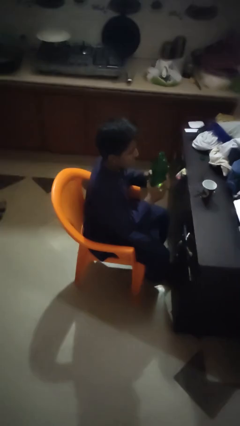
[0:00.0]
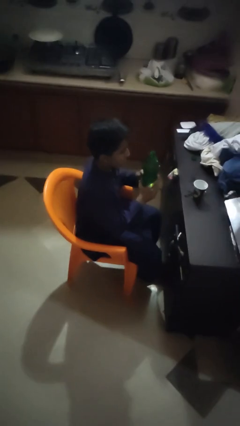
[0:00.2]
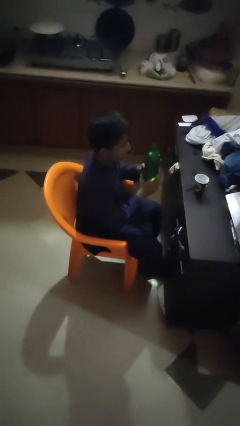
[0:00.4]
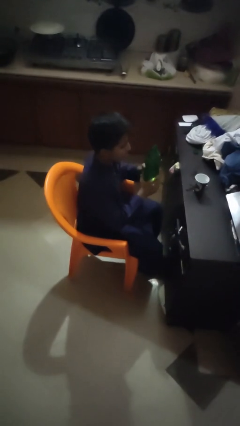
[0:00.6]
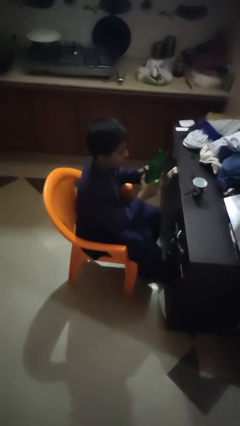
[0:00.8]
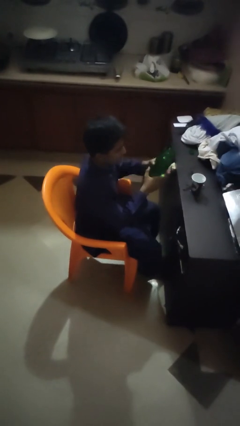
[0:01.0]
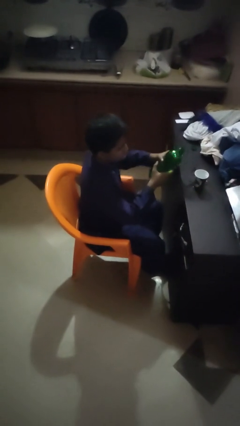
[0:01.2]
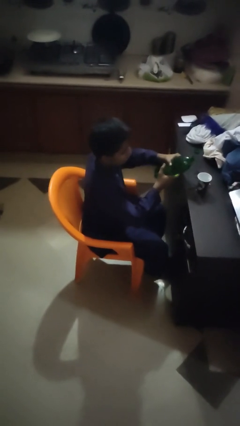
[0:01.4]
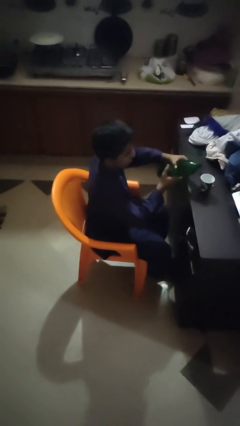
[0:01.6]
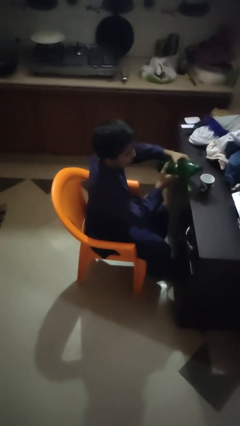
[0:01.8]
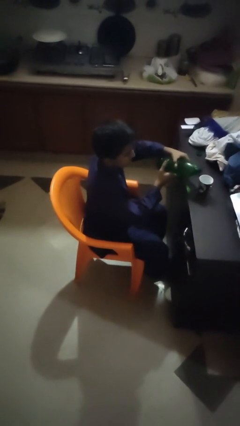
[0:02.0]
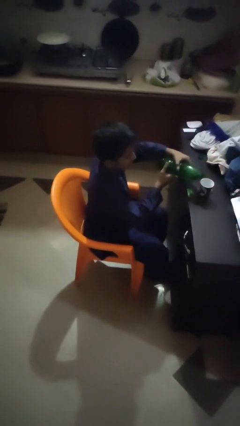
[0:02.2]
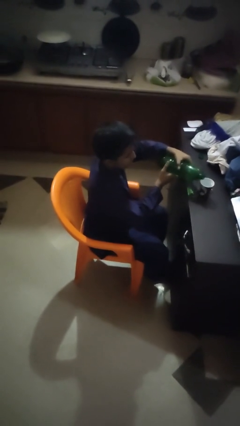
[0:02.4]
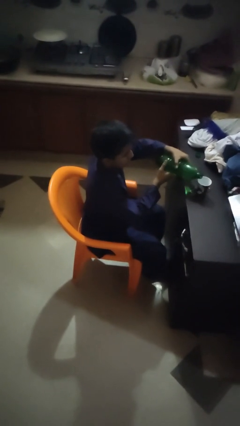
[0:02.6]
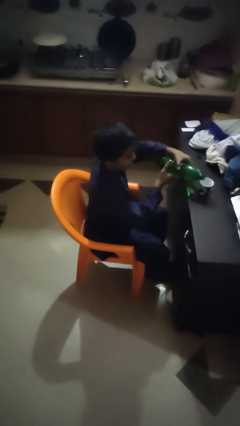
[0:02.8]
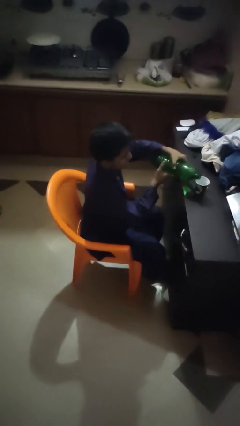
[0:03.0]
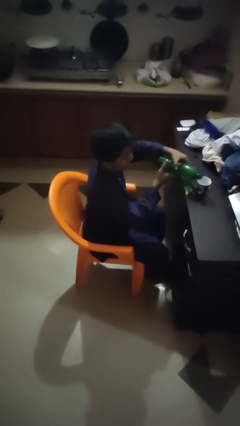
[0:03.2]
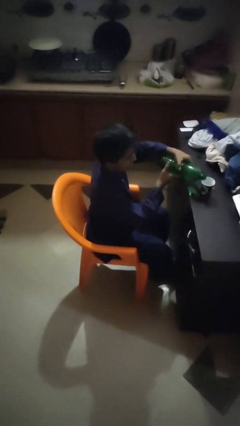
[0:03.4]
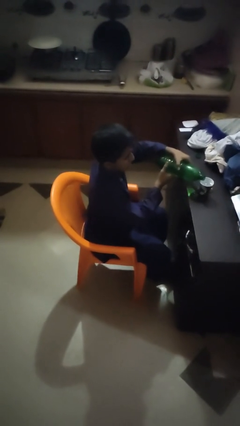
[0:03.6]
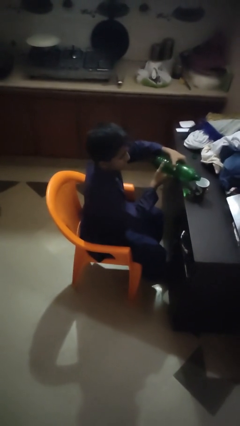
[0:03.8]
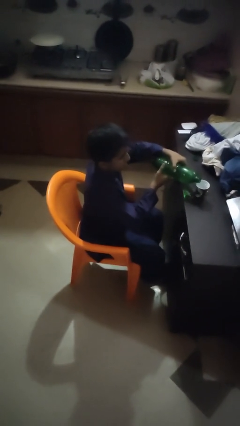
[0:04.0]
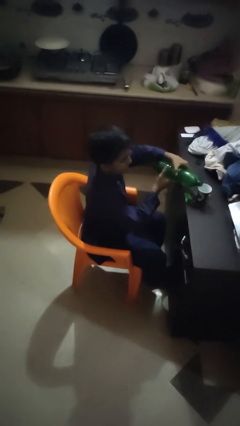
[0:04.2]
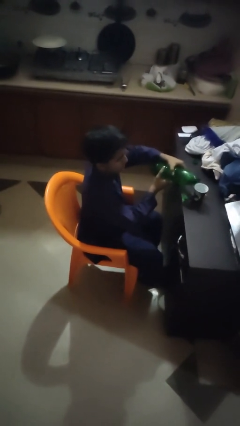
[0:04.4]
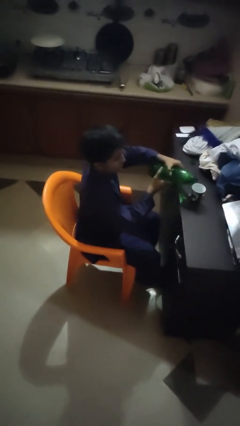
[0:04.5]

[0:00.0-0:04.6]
person pours liquid into cup

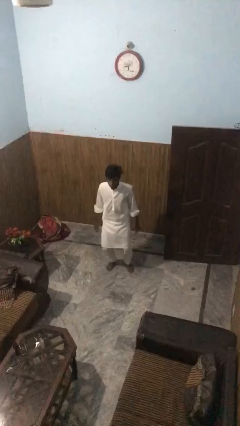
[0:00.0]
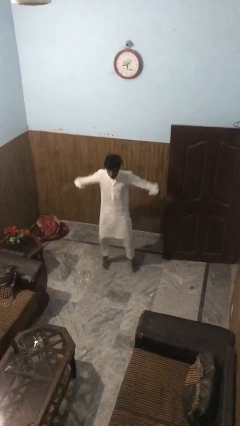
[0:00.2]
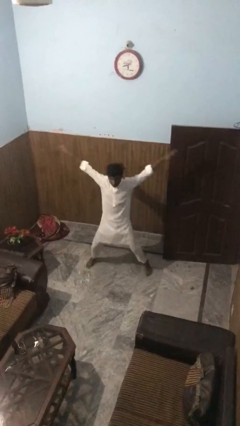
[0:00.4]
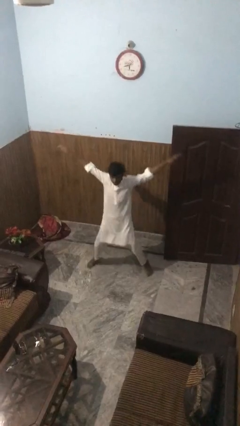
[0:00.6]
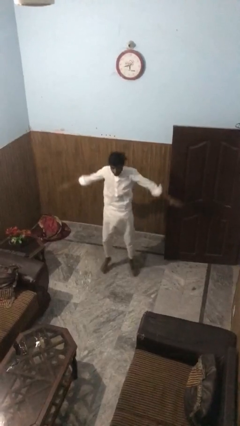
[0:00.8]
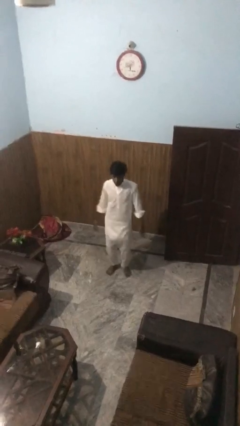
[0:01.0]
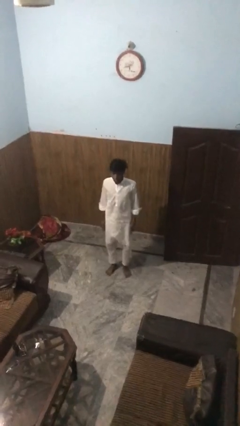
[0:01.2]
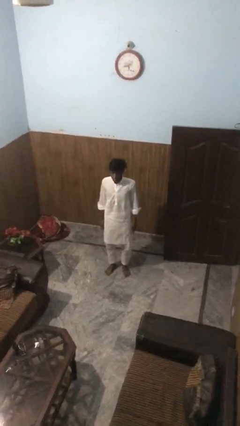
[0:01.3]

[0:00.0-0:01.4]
person exercises with jumping jacks

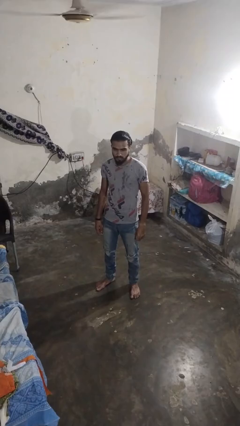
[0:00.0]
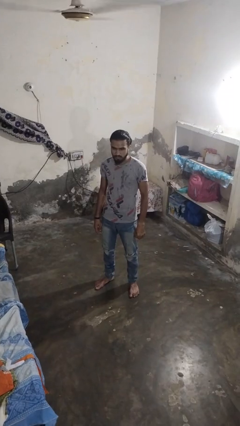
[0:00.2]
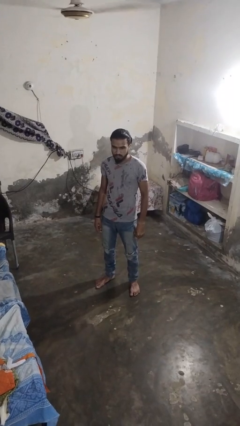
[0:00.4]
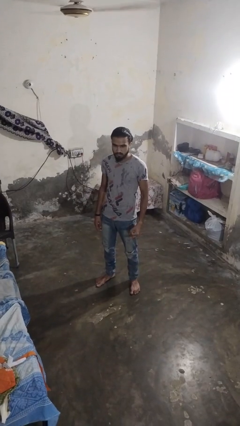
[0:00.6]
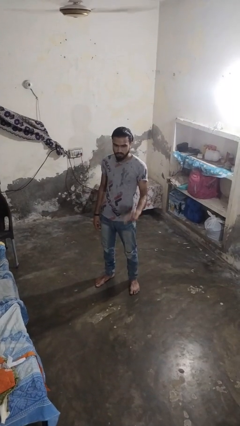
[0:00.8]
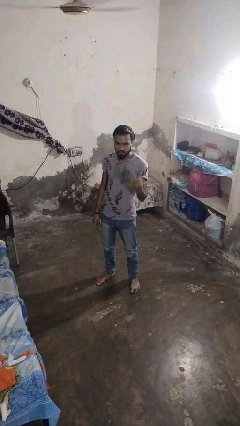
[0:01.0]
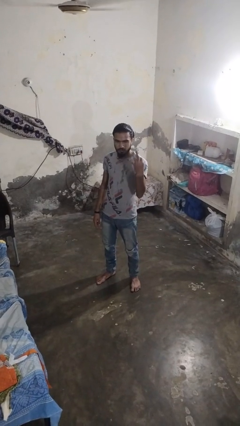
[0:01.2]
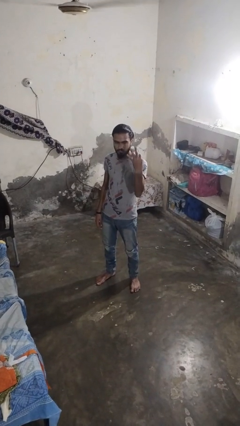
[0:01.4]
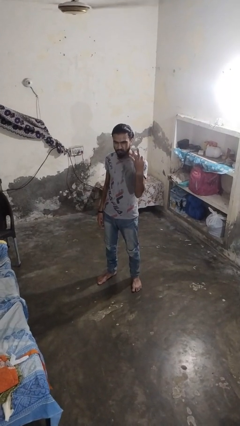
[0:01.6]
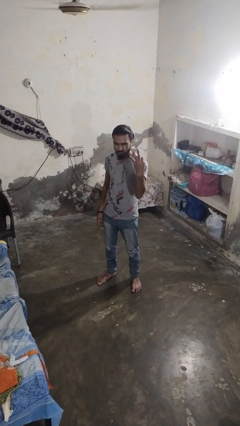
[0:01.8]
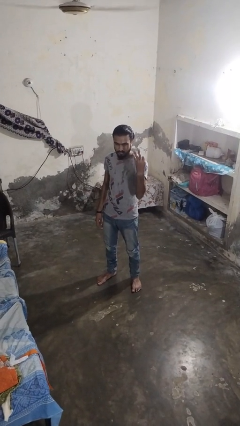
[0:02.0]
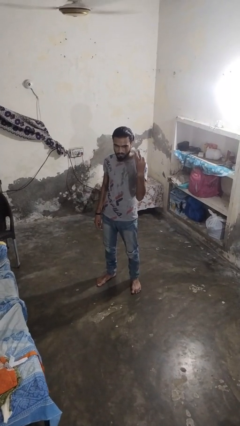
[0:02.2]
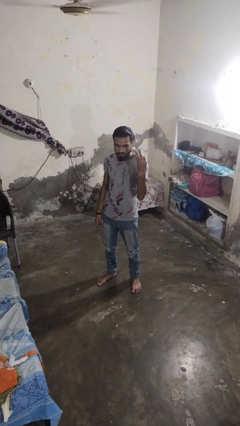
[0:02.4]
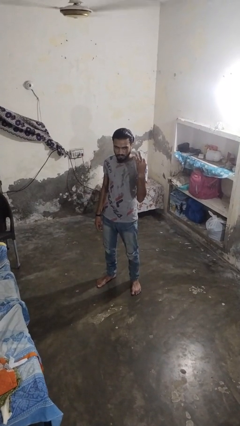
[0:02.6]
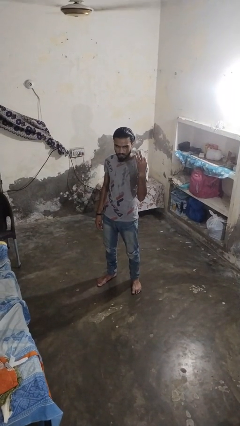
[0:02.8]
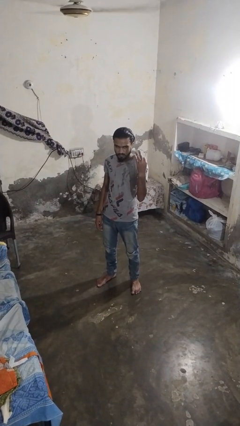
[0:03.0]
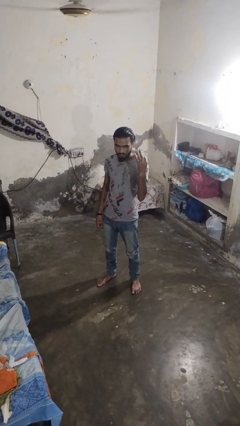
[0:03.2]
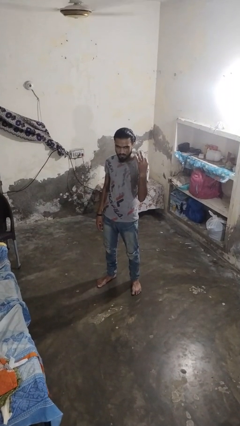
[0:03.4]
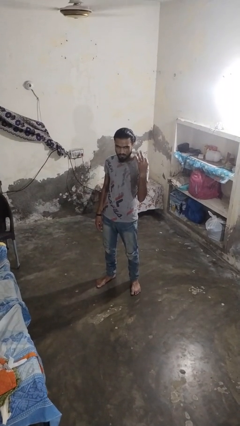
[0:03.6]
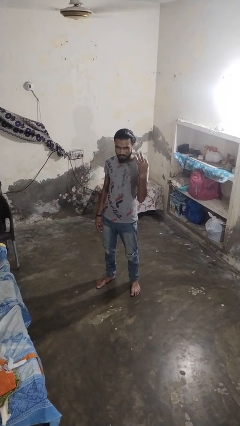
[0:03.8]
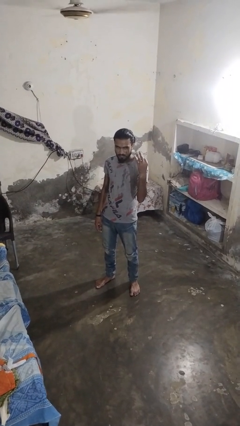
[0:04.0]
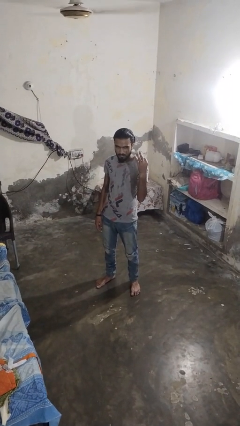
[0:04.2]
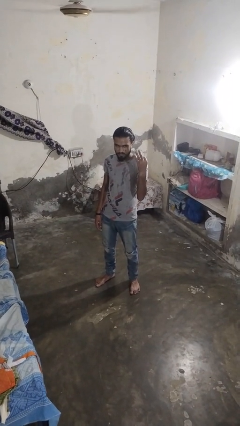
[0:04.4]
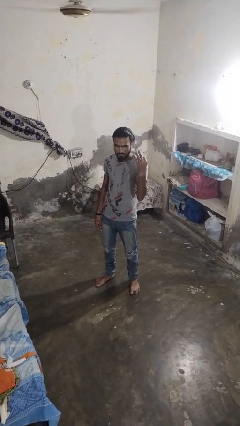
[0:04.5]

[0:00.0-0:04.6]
person gestures number three

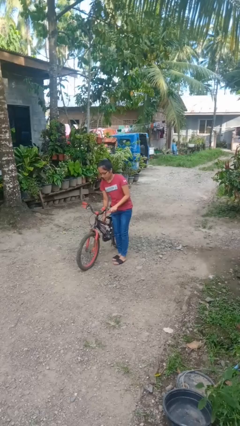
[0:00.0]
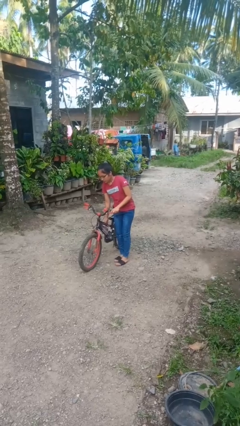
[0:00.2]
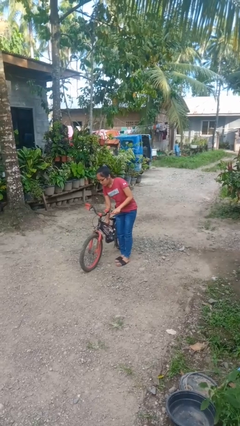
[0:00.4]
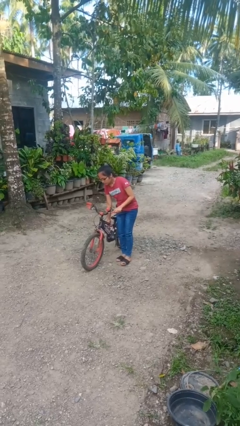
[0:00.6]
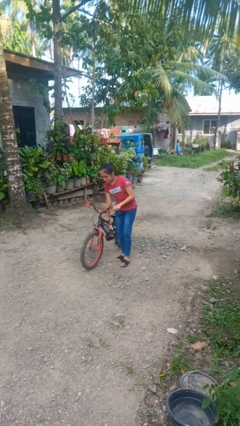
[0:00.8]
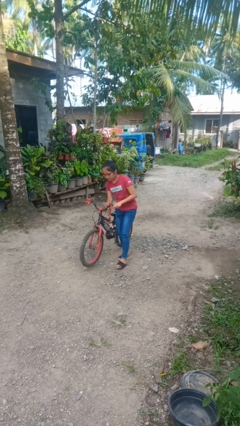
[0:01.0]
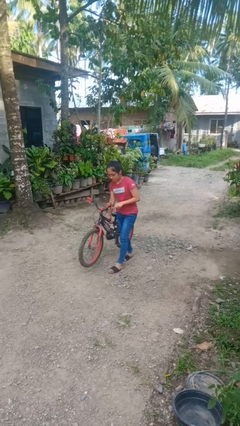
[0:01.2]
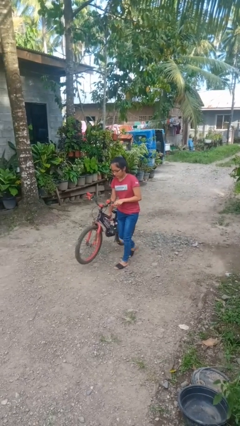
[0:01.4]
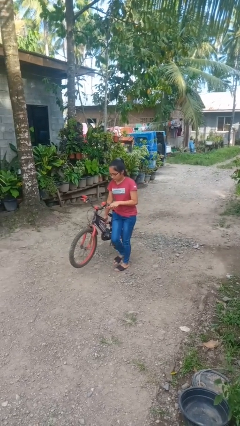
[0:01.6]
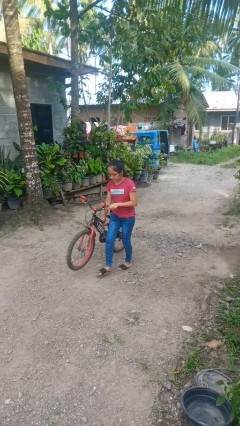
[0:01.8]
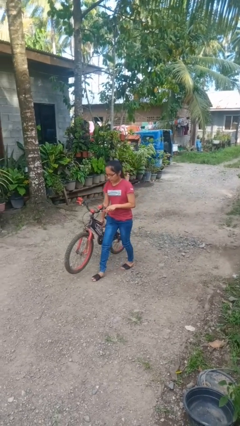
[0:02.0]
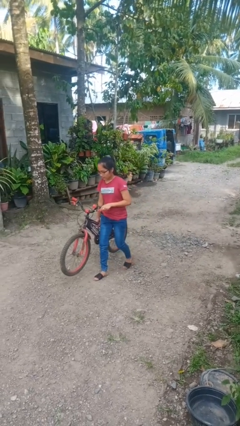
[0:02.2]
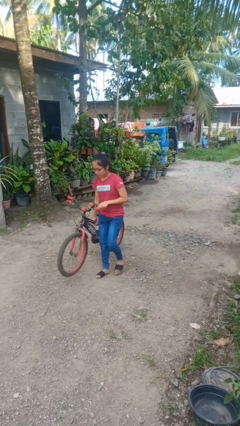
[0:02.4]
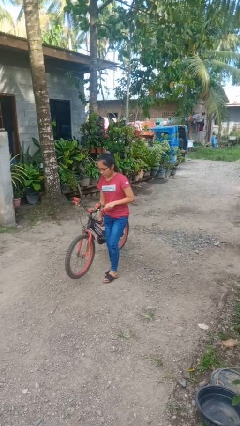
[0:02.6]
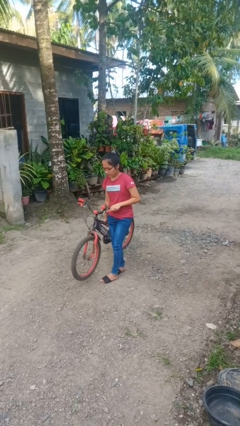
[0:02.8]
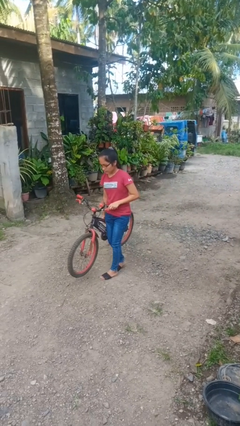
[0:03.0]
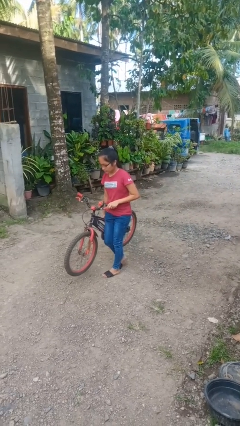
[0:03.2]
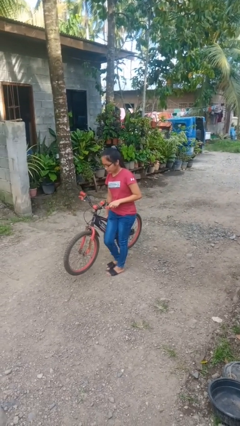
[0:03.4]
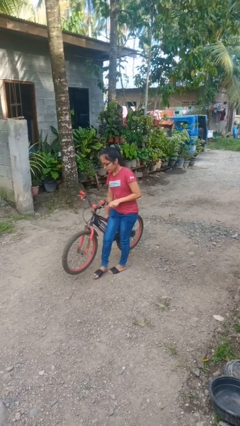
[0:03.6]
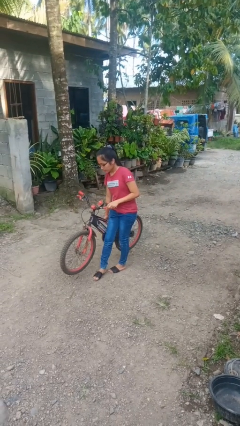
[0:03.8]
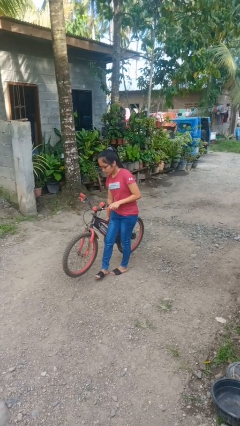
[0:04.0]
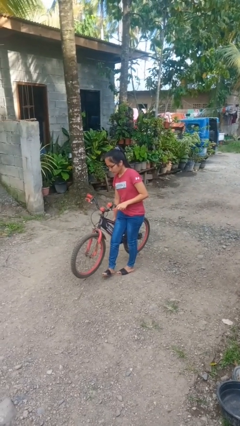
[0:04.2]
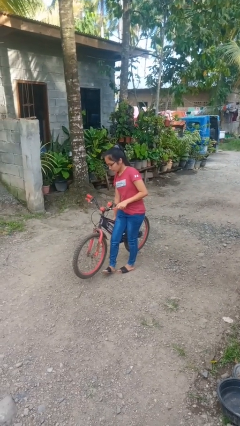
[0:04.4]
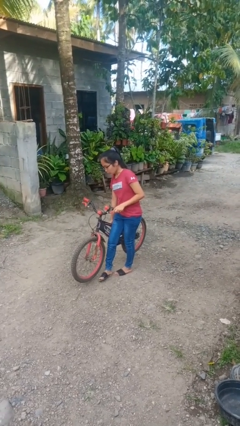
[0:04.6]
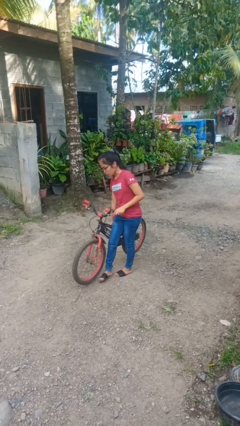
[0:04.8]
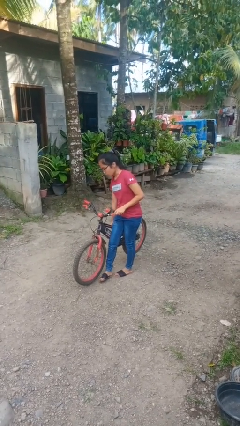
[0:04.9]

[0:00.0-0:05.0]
person carries bicycle

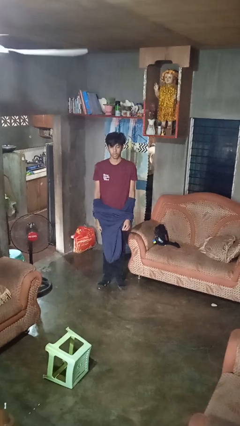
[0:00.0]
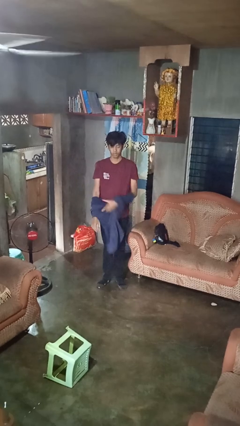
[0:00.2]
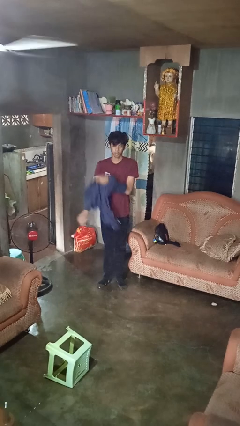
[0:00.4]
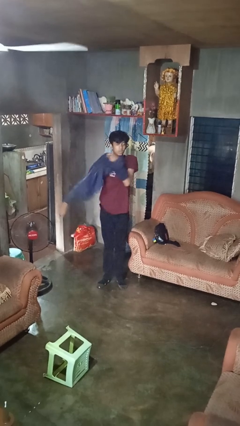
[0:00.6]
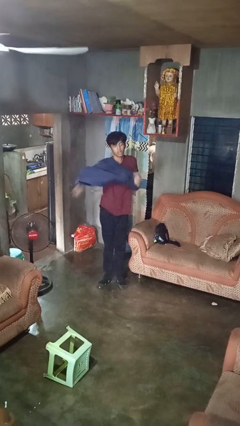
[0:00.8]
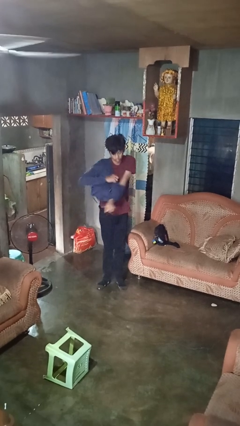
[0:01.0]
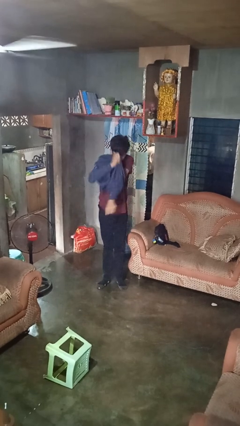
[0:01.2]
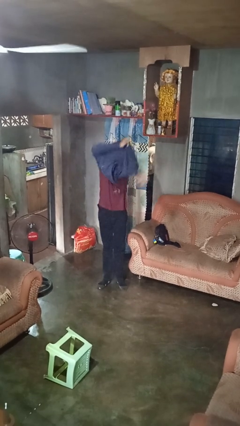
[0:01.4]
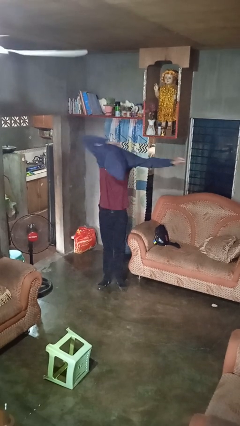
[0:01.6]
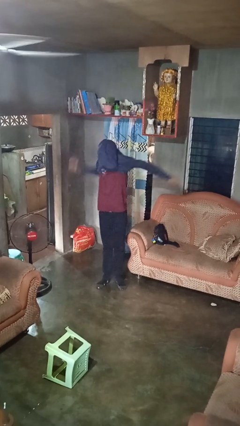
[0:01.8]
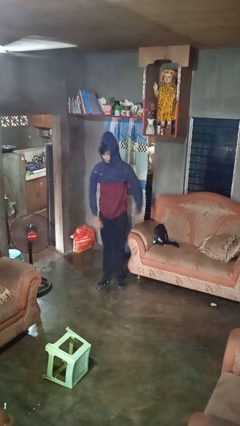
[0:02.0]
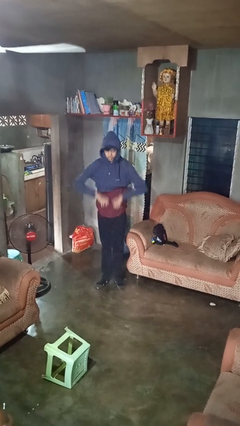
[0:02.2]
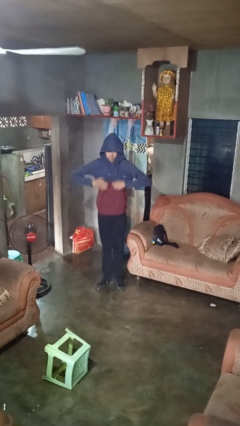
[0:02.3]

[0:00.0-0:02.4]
person puts on hoodie
